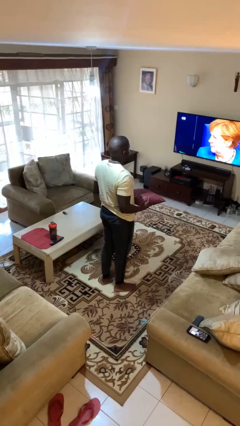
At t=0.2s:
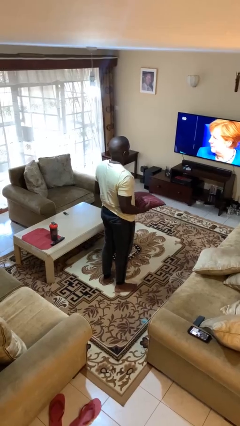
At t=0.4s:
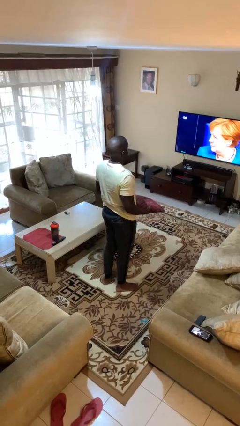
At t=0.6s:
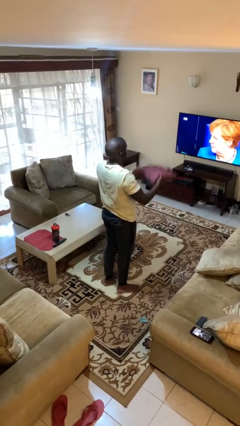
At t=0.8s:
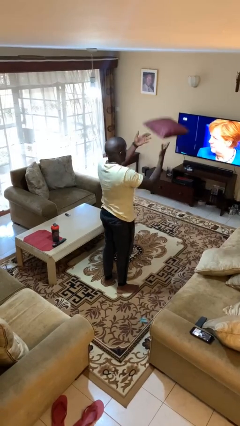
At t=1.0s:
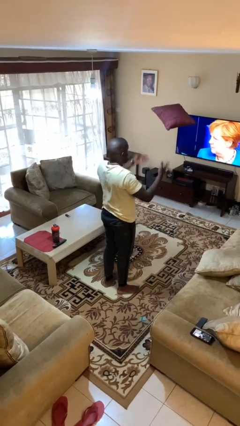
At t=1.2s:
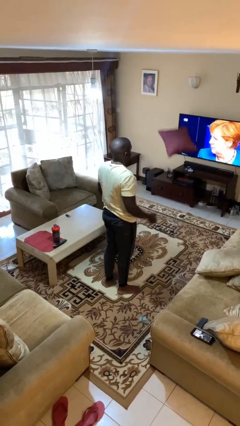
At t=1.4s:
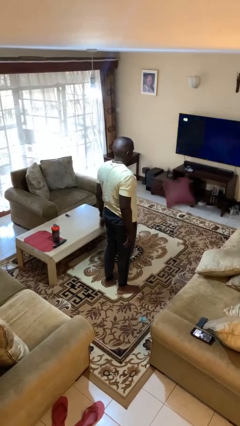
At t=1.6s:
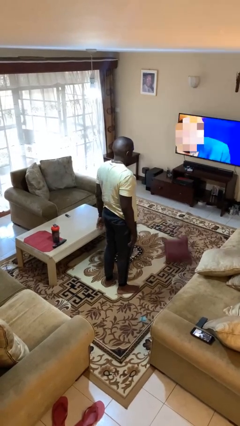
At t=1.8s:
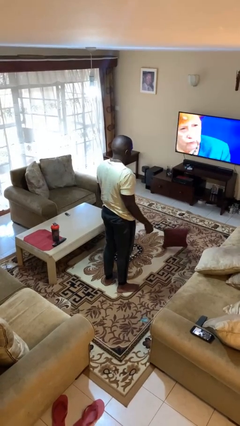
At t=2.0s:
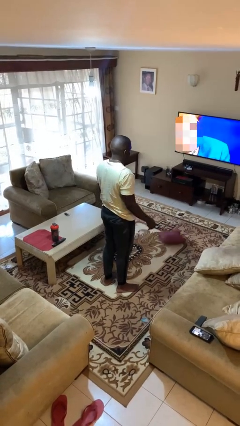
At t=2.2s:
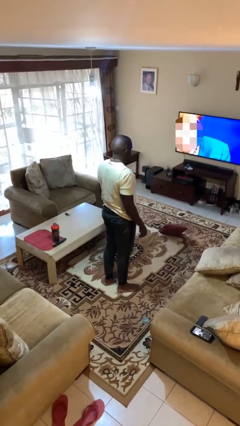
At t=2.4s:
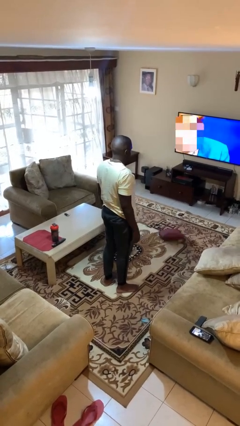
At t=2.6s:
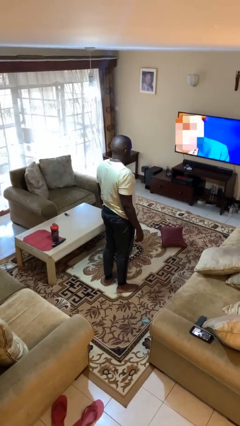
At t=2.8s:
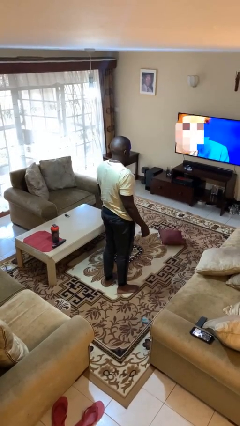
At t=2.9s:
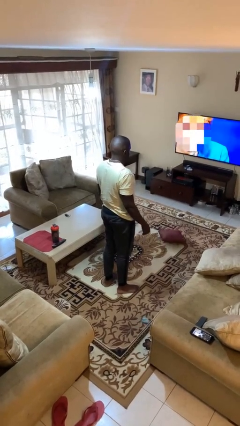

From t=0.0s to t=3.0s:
person throws object into air

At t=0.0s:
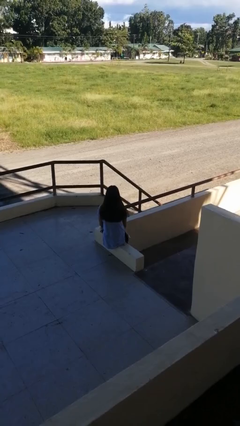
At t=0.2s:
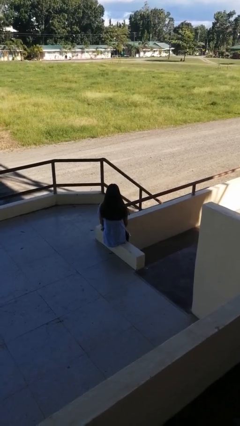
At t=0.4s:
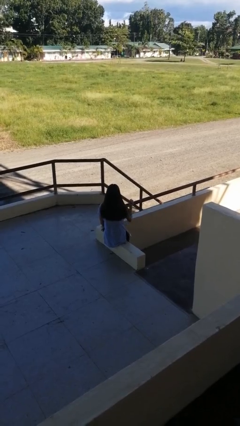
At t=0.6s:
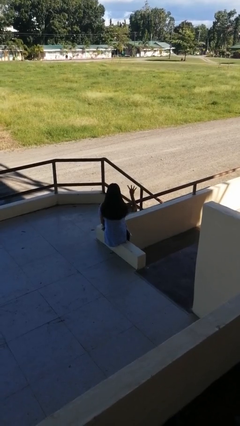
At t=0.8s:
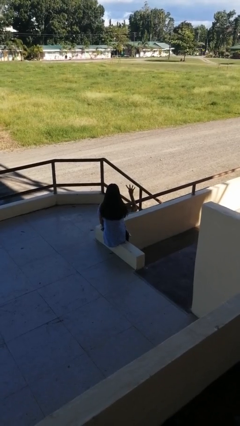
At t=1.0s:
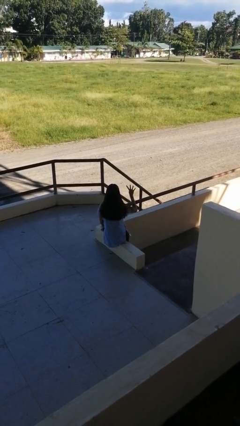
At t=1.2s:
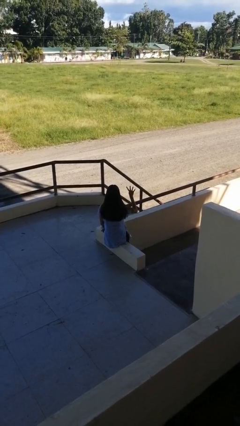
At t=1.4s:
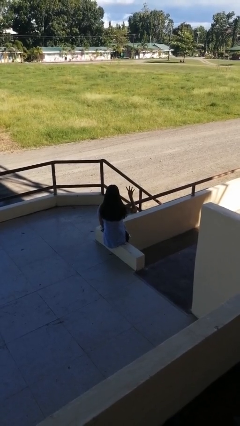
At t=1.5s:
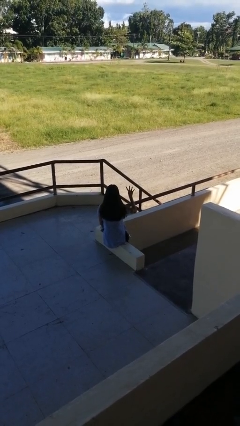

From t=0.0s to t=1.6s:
person gestures number four

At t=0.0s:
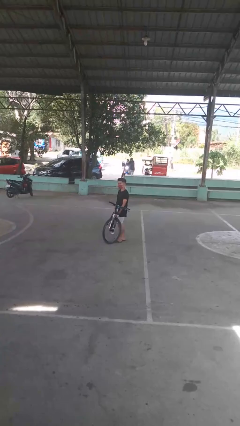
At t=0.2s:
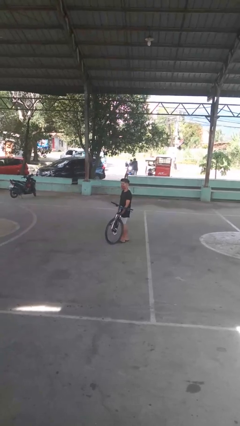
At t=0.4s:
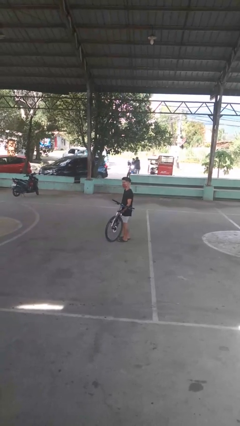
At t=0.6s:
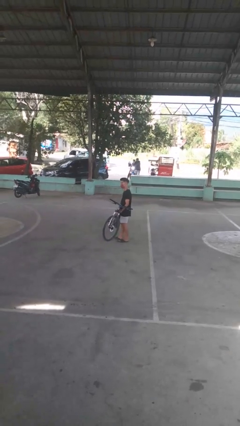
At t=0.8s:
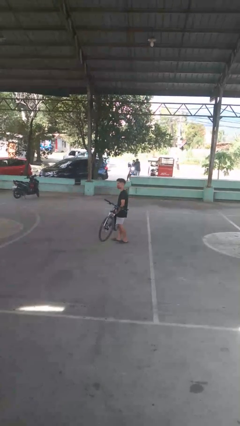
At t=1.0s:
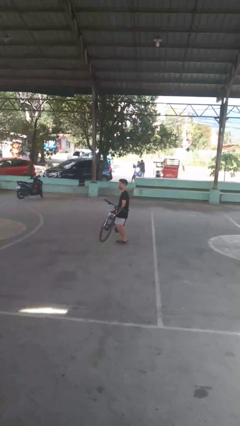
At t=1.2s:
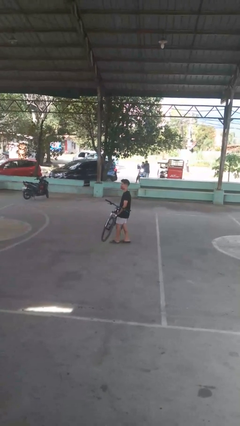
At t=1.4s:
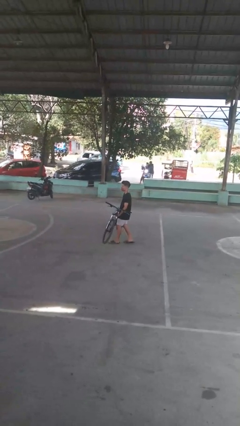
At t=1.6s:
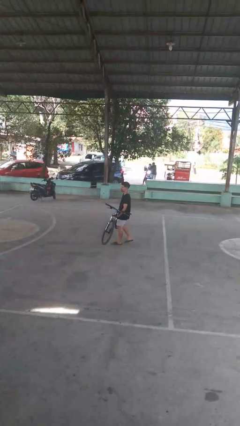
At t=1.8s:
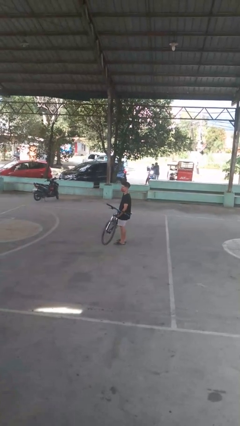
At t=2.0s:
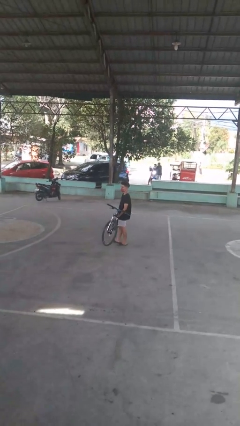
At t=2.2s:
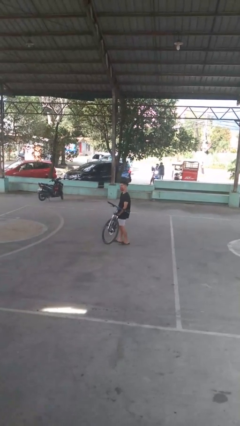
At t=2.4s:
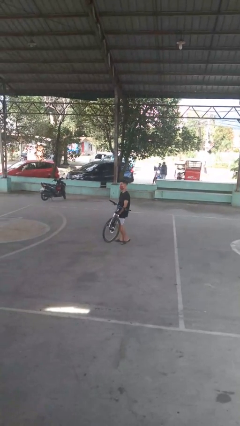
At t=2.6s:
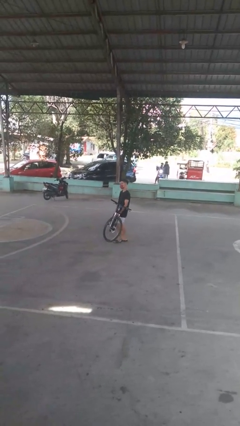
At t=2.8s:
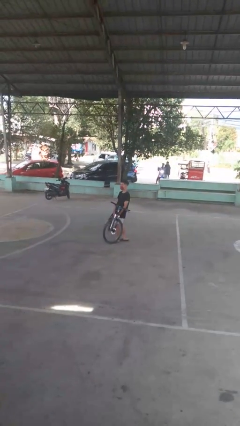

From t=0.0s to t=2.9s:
person carries bicycle

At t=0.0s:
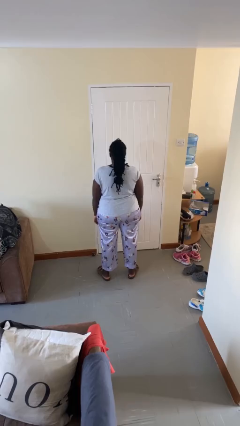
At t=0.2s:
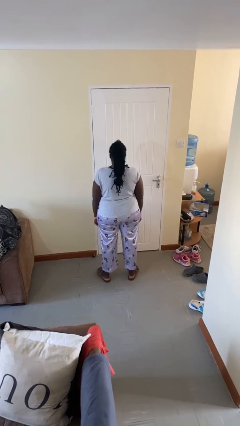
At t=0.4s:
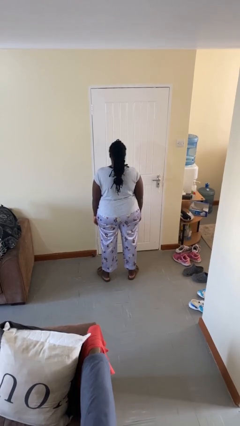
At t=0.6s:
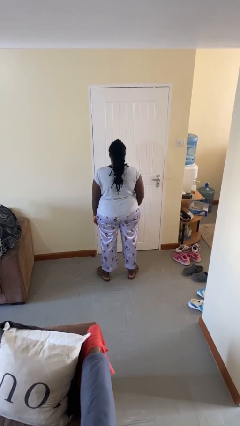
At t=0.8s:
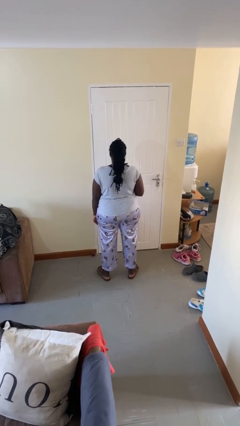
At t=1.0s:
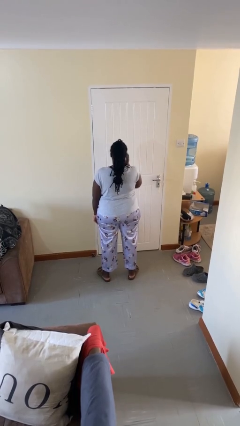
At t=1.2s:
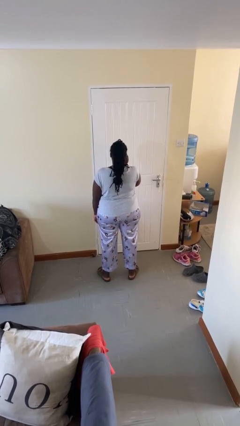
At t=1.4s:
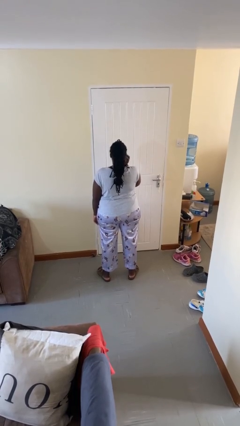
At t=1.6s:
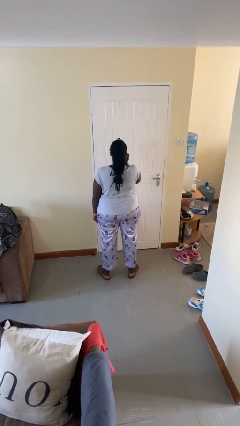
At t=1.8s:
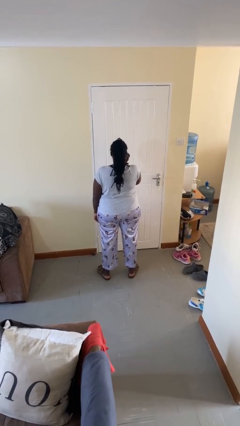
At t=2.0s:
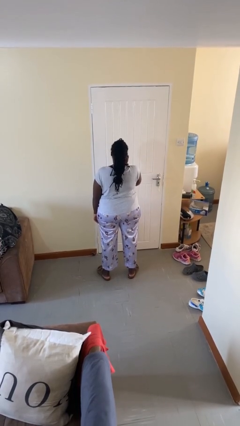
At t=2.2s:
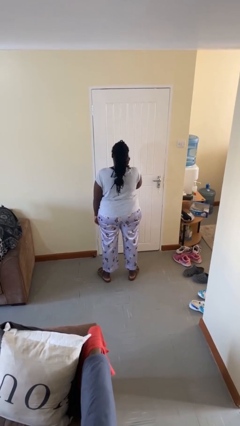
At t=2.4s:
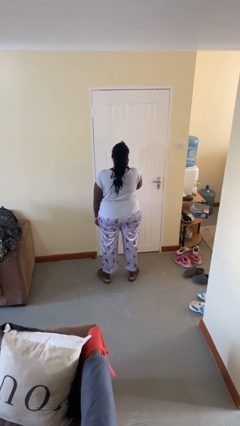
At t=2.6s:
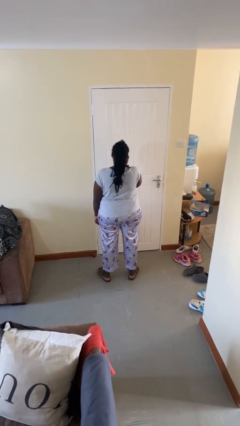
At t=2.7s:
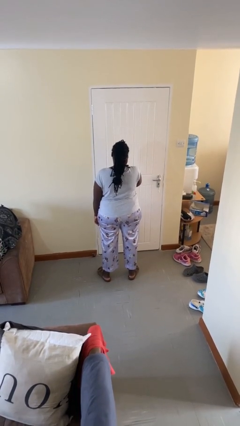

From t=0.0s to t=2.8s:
person scratches face

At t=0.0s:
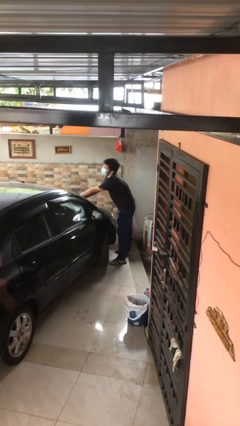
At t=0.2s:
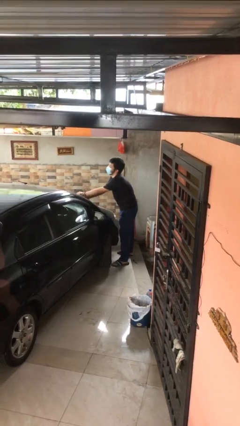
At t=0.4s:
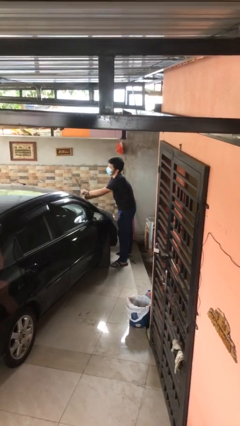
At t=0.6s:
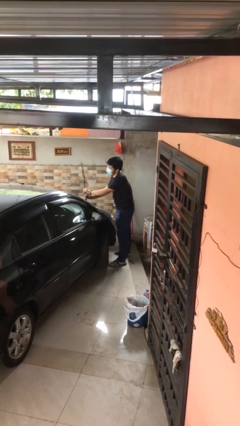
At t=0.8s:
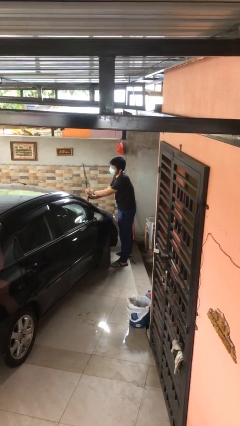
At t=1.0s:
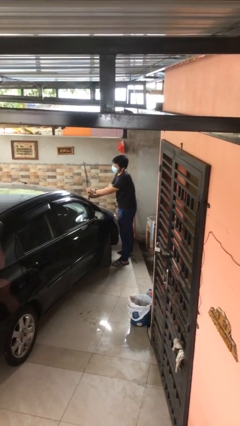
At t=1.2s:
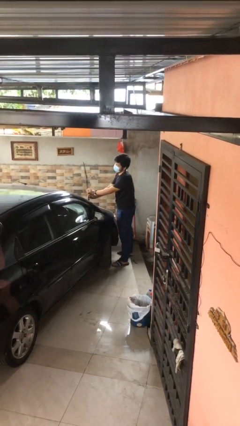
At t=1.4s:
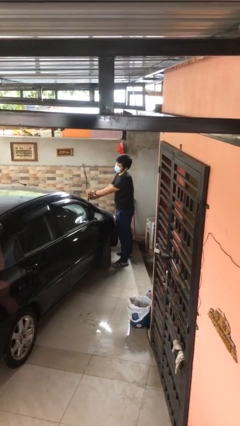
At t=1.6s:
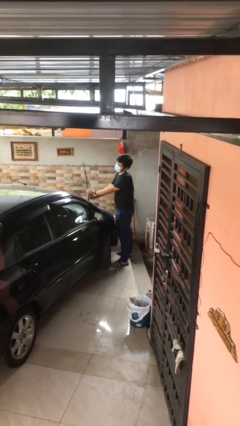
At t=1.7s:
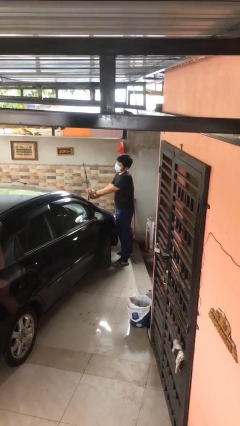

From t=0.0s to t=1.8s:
person flips up car wipers

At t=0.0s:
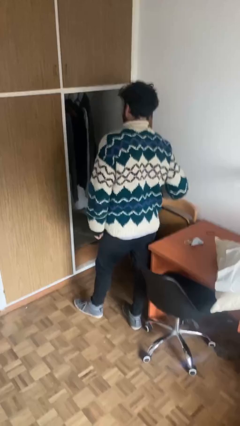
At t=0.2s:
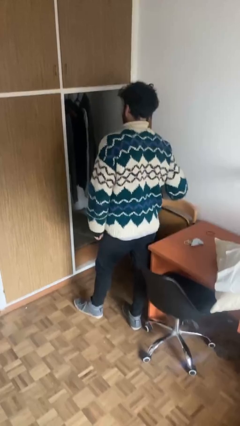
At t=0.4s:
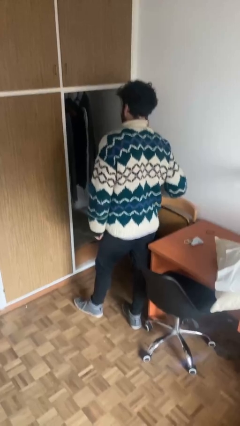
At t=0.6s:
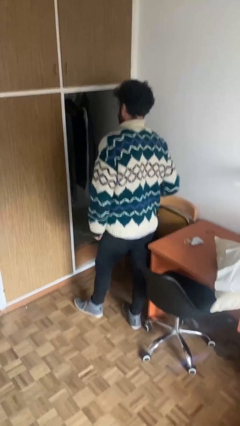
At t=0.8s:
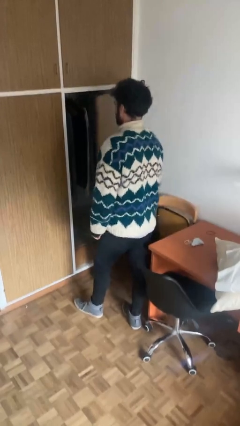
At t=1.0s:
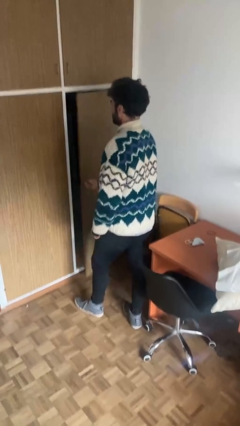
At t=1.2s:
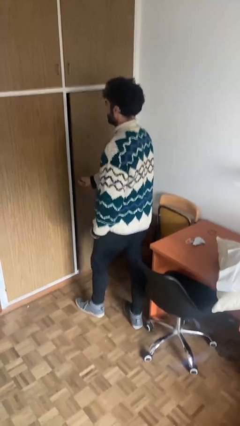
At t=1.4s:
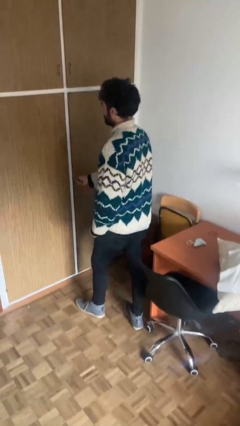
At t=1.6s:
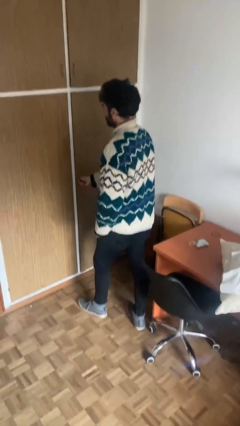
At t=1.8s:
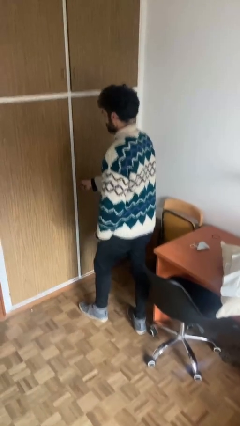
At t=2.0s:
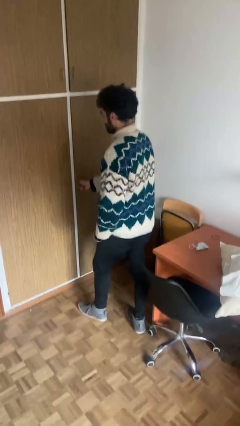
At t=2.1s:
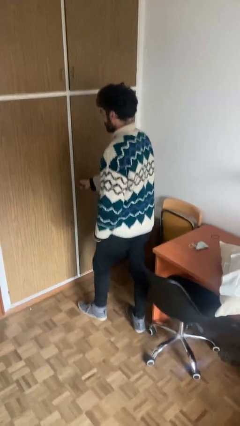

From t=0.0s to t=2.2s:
person closes closet door

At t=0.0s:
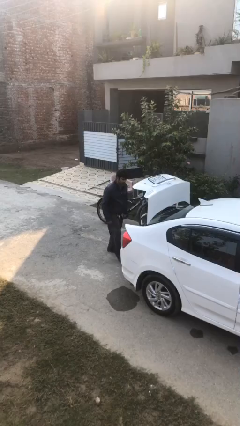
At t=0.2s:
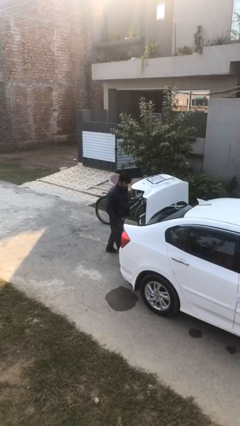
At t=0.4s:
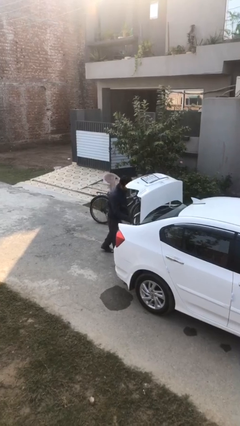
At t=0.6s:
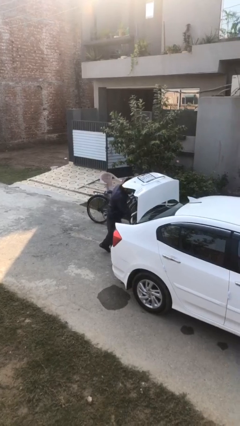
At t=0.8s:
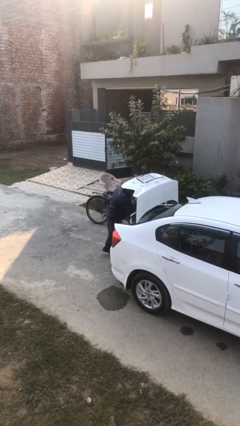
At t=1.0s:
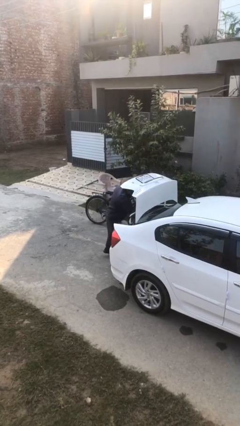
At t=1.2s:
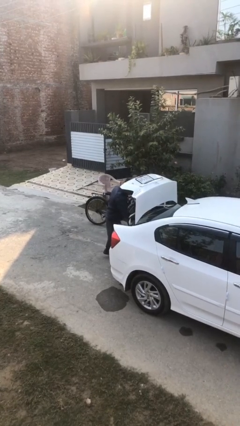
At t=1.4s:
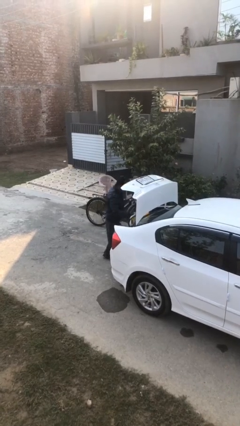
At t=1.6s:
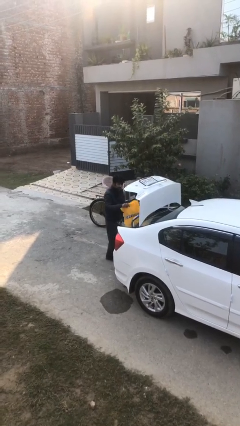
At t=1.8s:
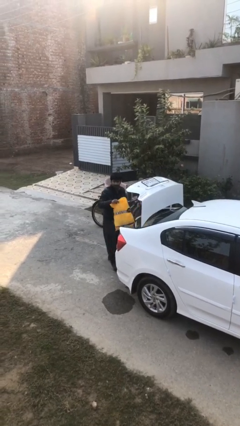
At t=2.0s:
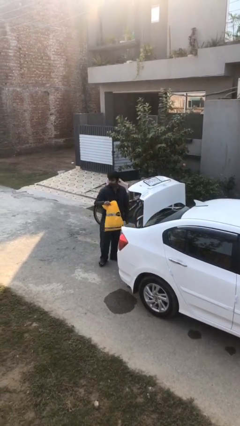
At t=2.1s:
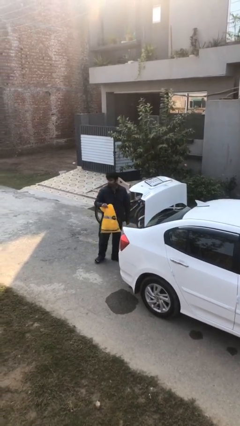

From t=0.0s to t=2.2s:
person unloads car

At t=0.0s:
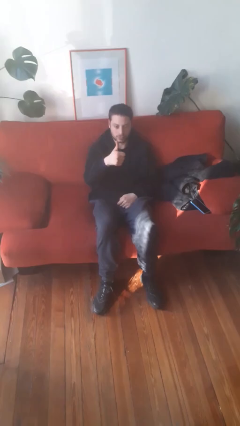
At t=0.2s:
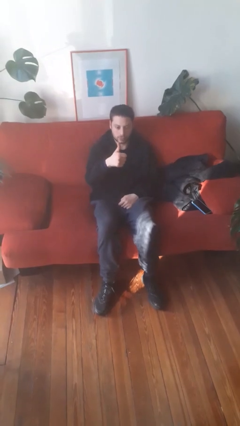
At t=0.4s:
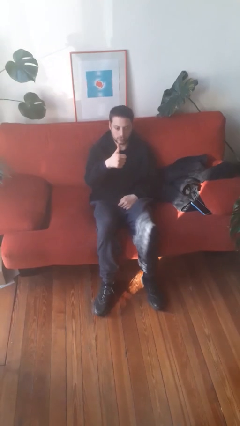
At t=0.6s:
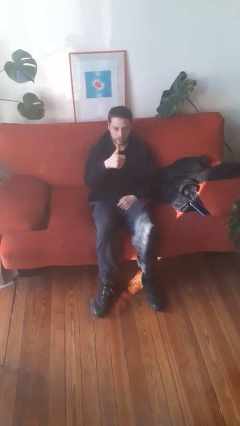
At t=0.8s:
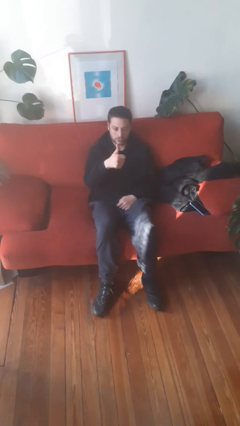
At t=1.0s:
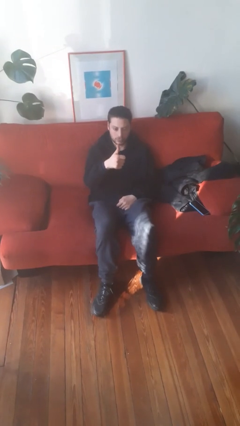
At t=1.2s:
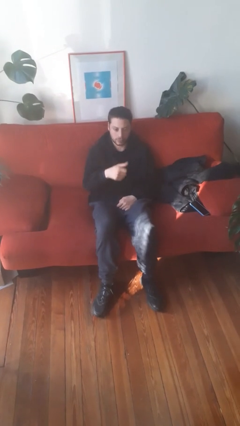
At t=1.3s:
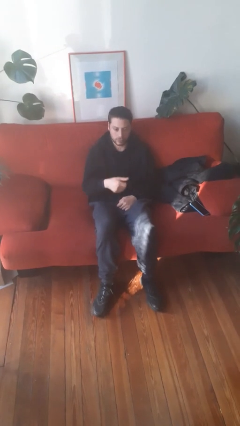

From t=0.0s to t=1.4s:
person gestures thumbs up
